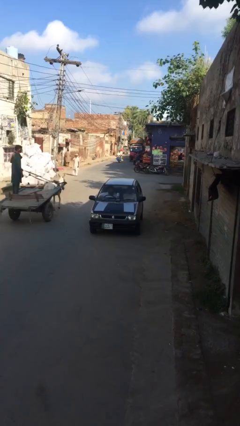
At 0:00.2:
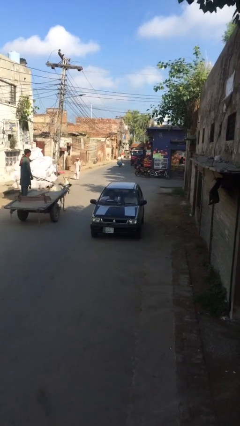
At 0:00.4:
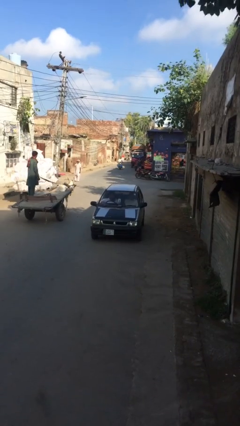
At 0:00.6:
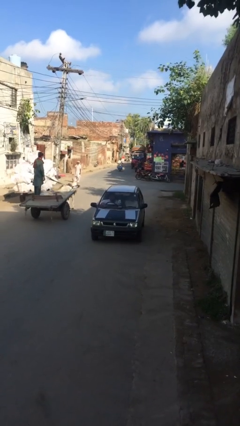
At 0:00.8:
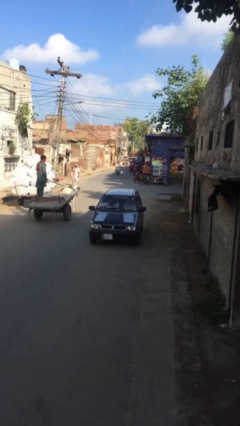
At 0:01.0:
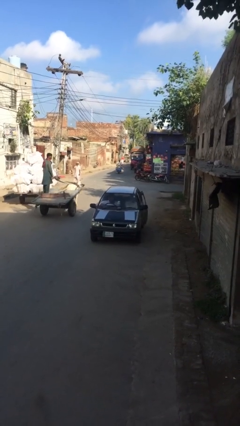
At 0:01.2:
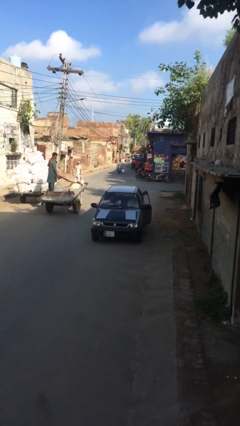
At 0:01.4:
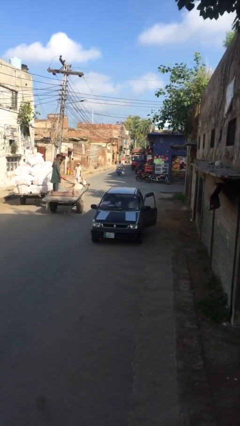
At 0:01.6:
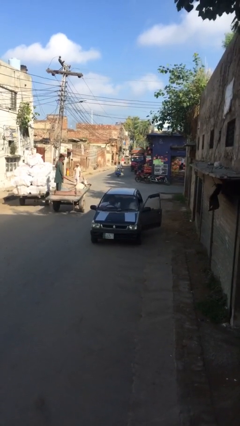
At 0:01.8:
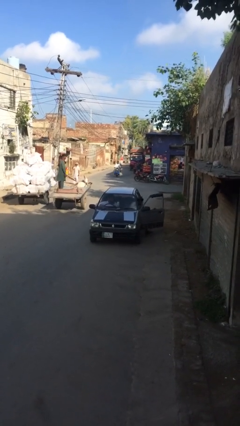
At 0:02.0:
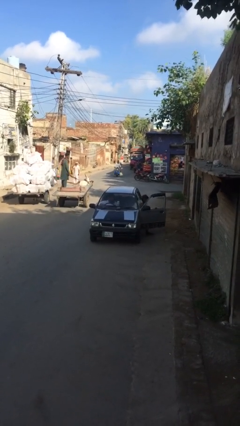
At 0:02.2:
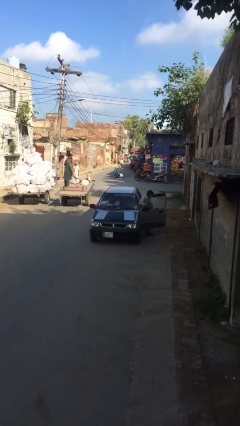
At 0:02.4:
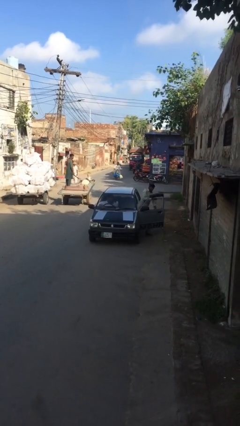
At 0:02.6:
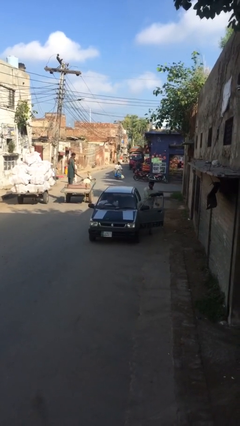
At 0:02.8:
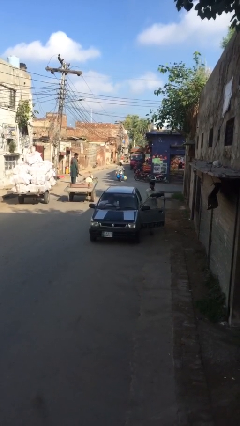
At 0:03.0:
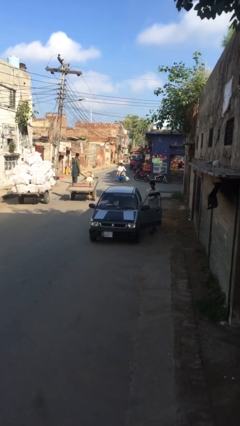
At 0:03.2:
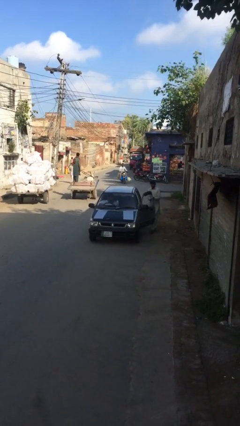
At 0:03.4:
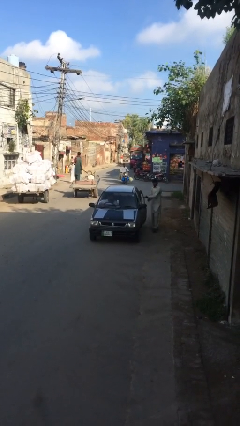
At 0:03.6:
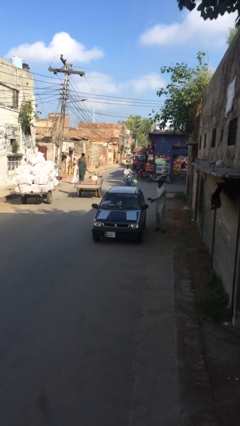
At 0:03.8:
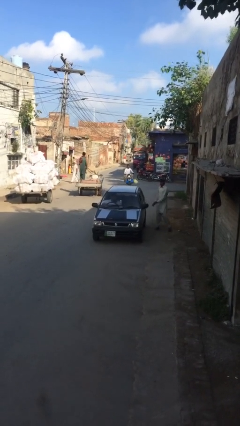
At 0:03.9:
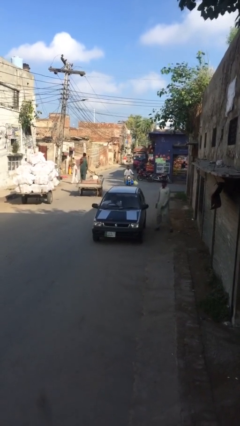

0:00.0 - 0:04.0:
car drops off person

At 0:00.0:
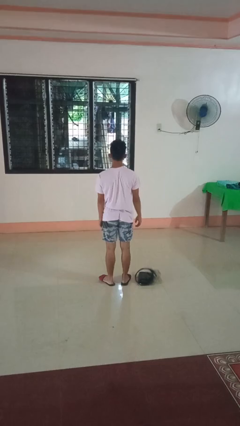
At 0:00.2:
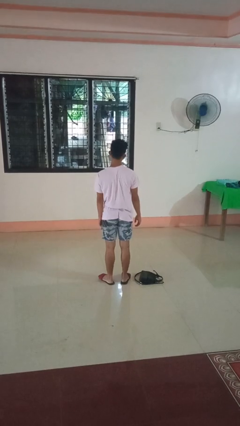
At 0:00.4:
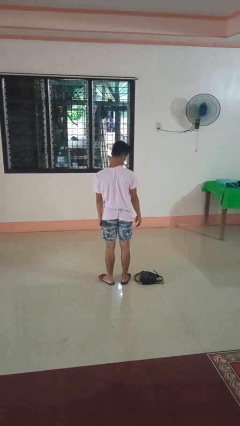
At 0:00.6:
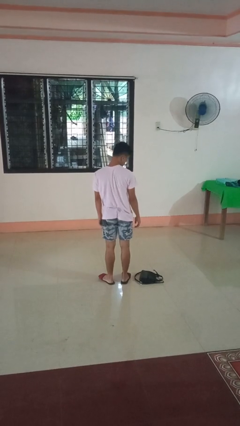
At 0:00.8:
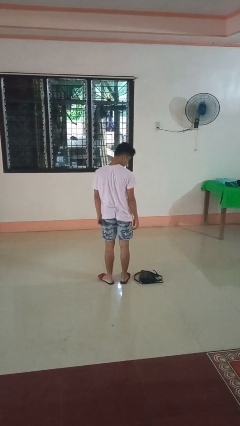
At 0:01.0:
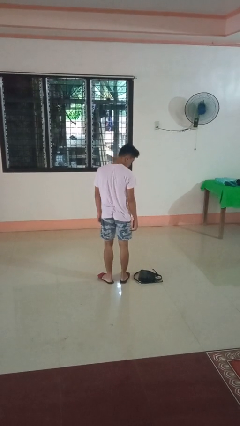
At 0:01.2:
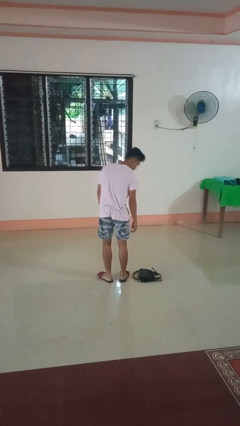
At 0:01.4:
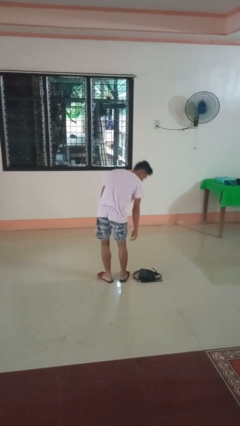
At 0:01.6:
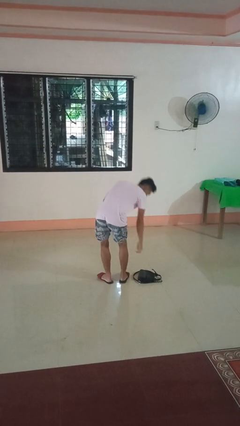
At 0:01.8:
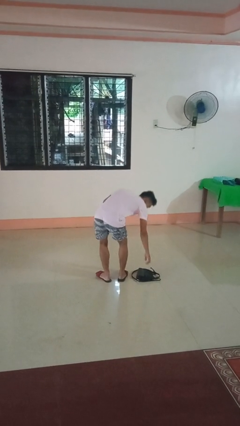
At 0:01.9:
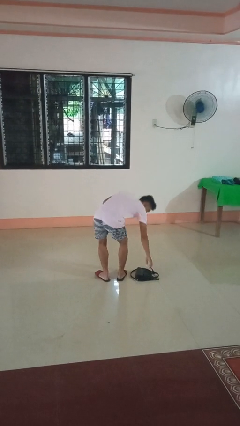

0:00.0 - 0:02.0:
person drops object

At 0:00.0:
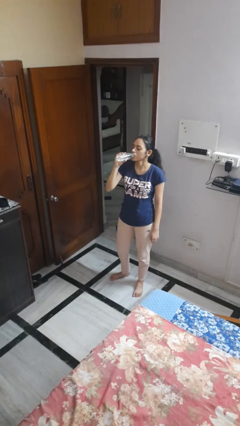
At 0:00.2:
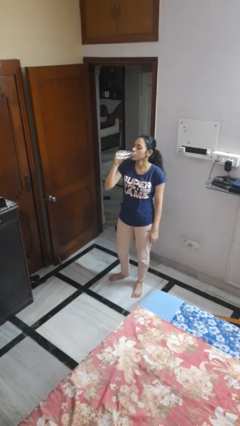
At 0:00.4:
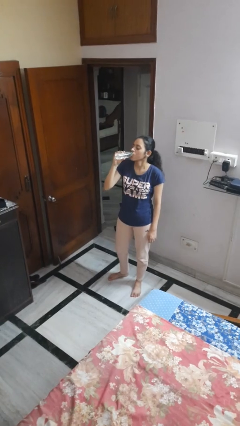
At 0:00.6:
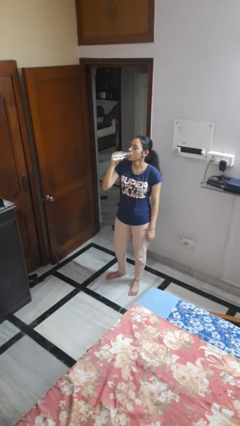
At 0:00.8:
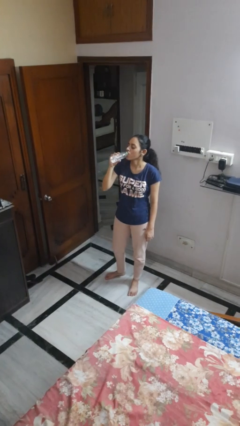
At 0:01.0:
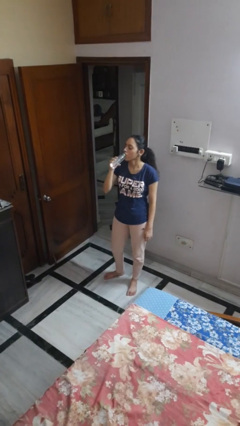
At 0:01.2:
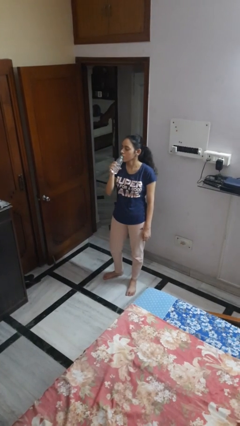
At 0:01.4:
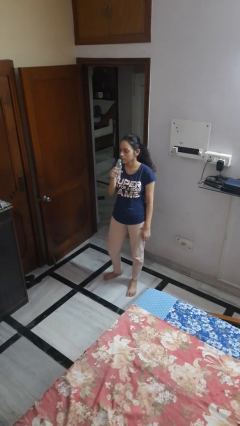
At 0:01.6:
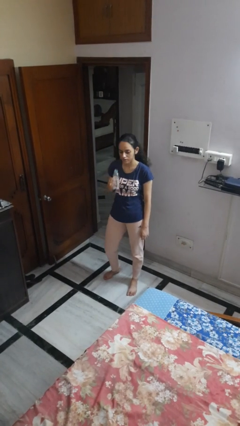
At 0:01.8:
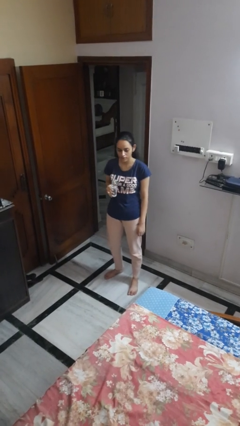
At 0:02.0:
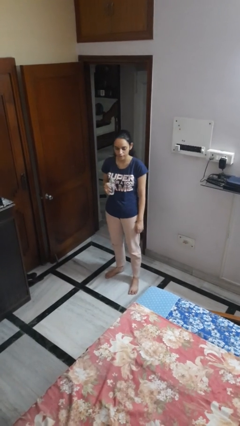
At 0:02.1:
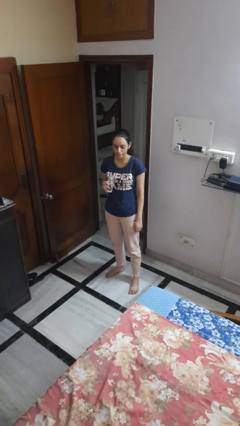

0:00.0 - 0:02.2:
person drinks from bottle

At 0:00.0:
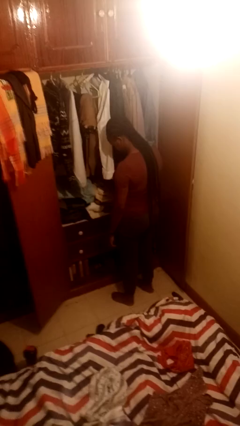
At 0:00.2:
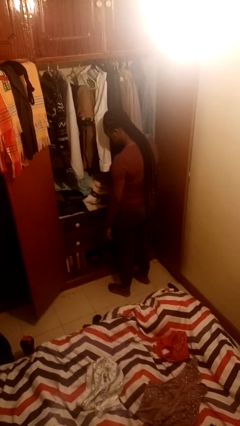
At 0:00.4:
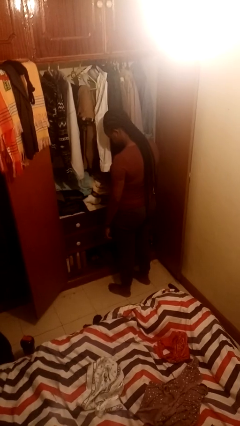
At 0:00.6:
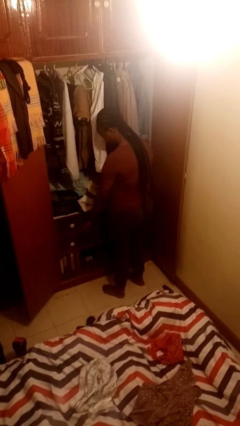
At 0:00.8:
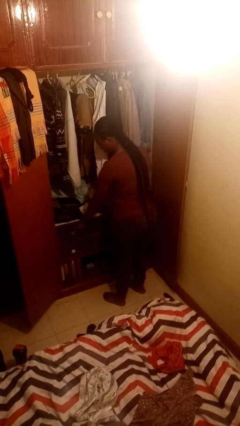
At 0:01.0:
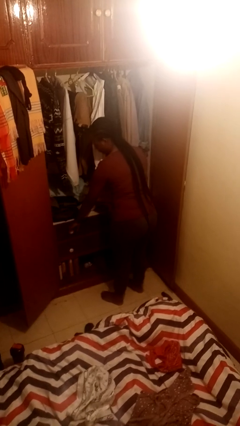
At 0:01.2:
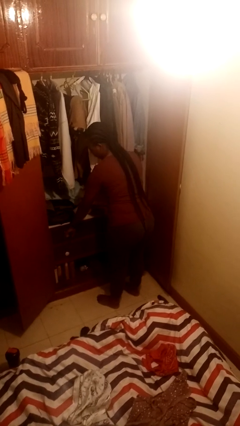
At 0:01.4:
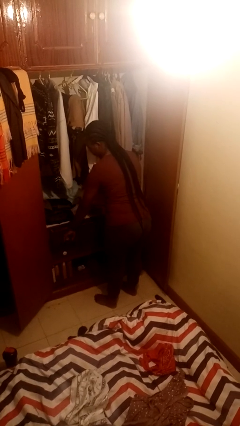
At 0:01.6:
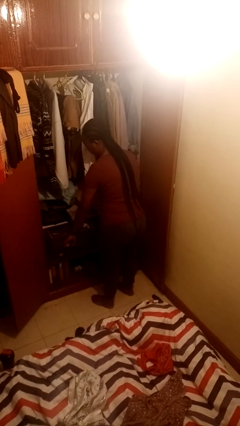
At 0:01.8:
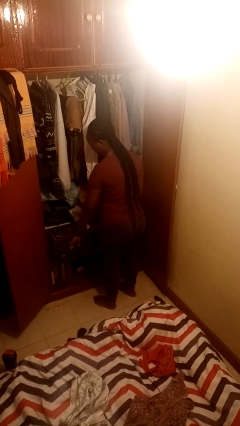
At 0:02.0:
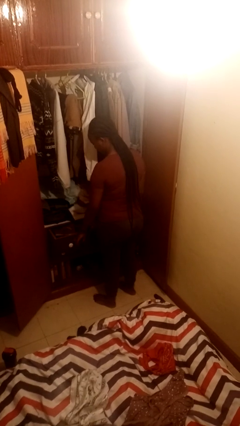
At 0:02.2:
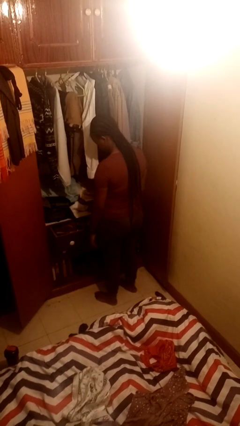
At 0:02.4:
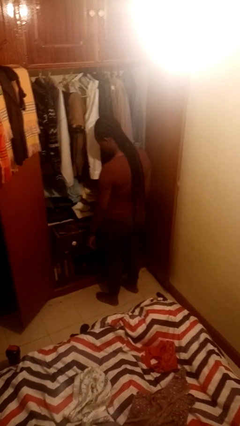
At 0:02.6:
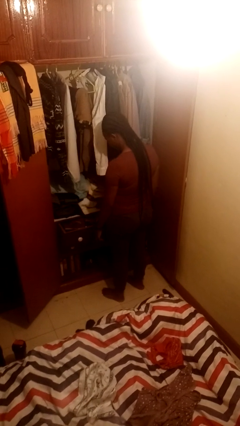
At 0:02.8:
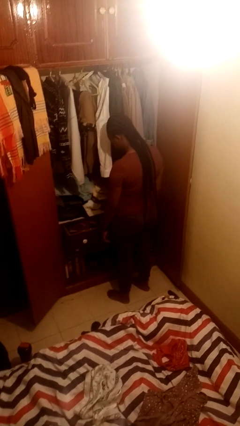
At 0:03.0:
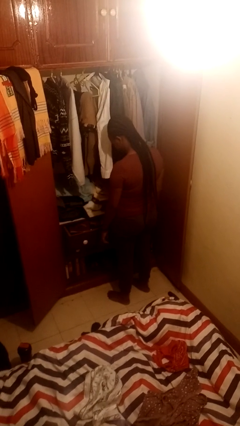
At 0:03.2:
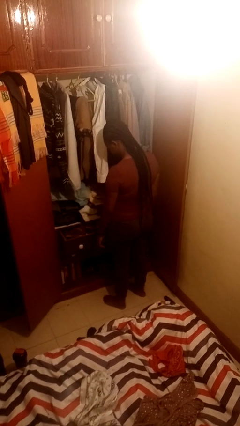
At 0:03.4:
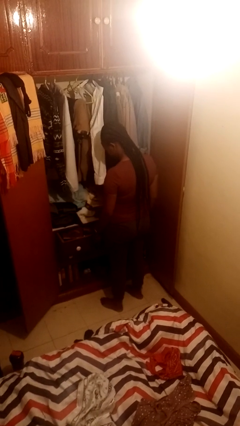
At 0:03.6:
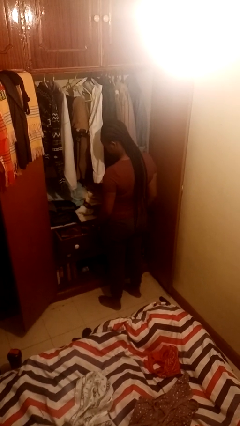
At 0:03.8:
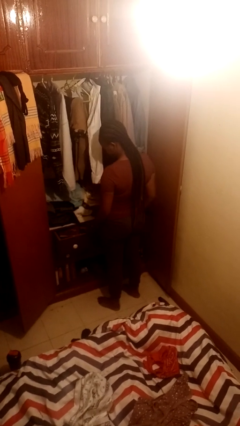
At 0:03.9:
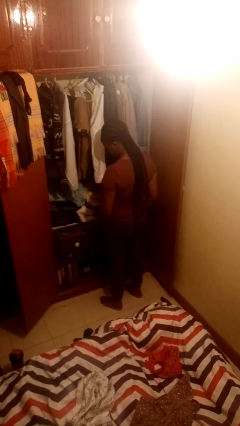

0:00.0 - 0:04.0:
person opens dresser drawer

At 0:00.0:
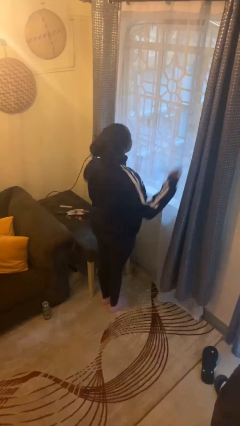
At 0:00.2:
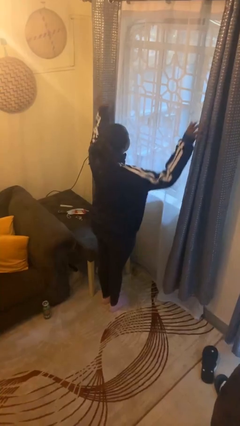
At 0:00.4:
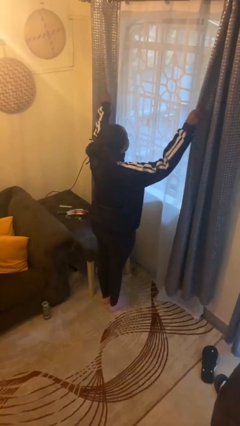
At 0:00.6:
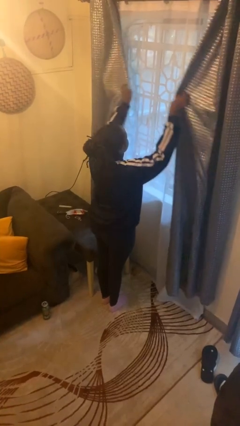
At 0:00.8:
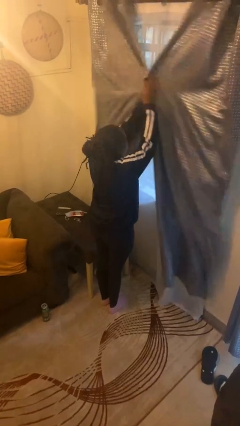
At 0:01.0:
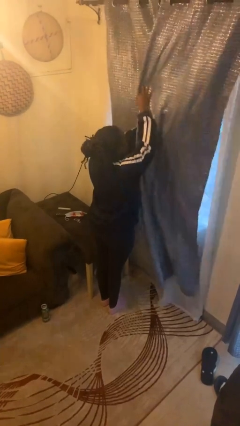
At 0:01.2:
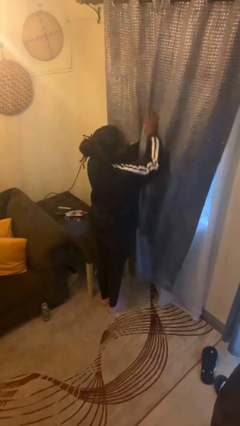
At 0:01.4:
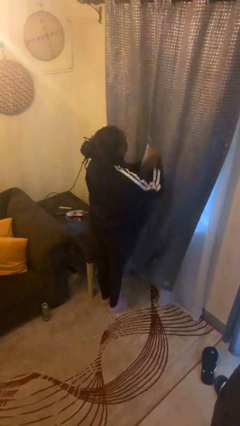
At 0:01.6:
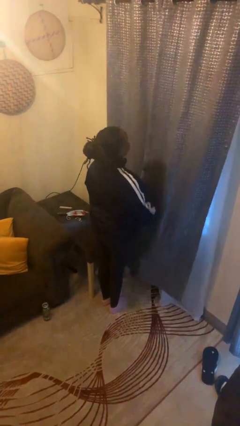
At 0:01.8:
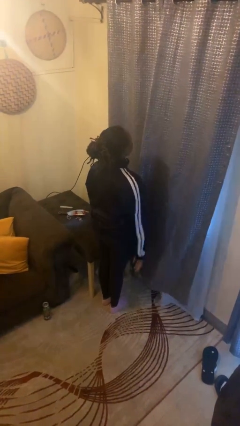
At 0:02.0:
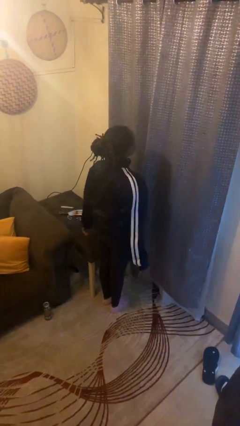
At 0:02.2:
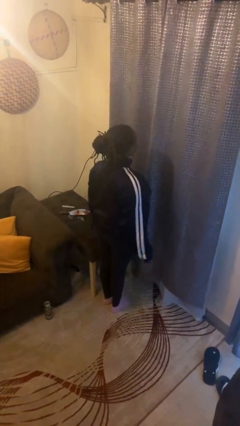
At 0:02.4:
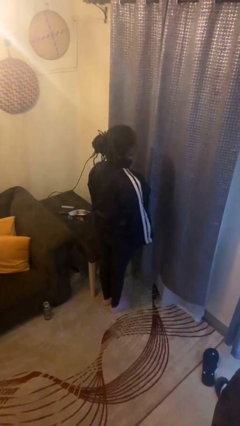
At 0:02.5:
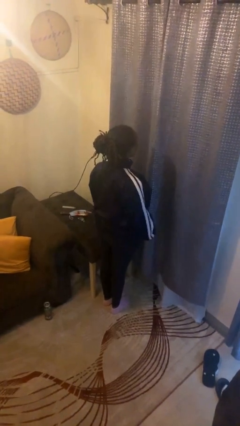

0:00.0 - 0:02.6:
person closes curtains

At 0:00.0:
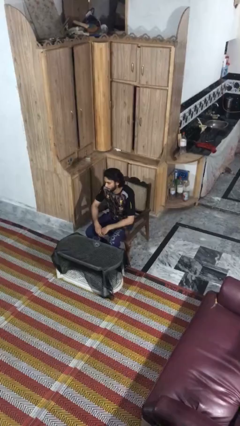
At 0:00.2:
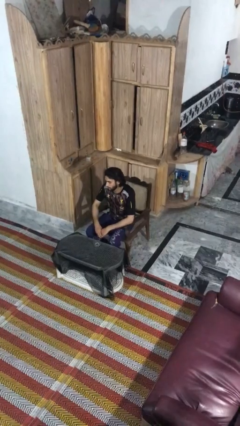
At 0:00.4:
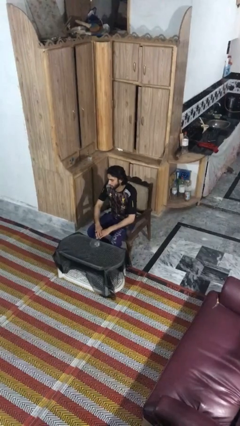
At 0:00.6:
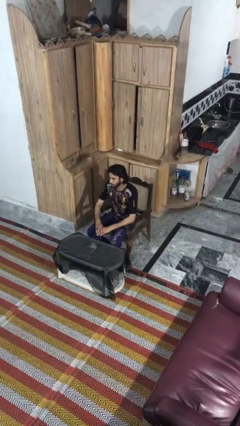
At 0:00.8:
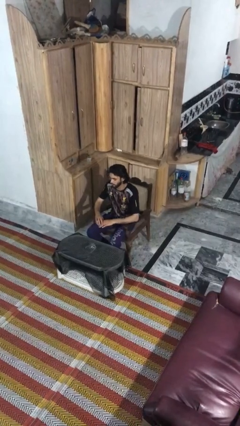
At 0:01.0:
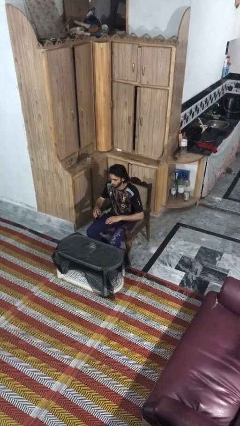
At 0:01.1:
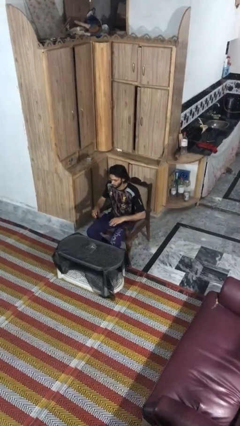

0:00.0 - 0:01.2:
person knocks over glass

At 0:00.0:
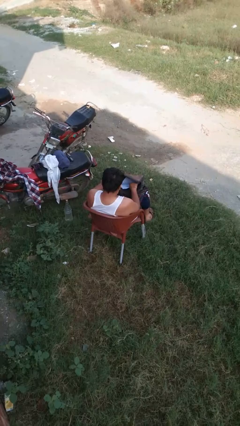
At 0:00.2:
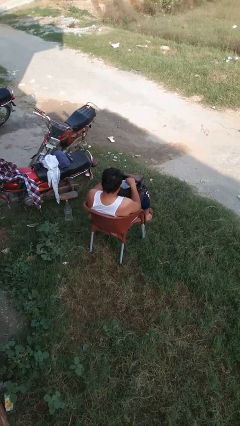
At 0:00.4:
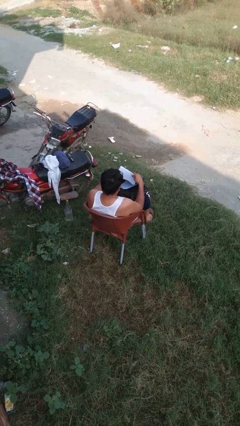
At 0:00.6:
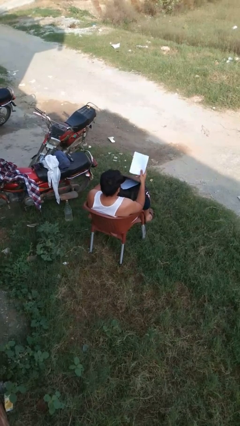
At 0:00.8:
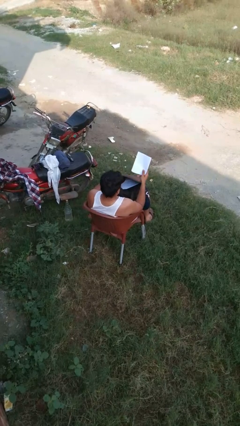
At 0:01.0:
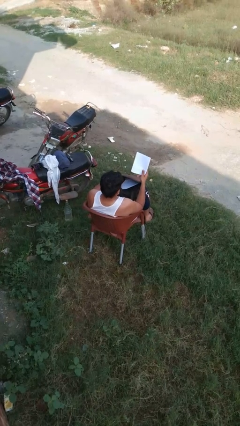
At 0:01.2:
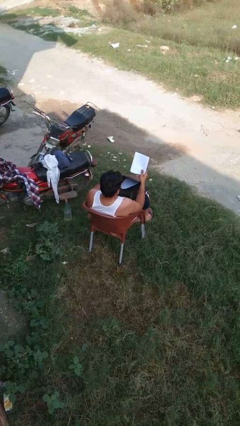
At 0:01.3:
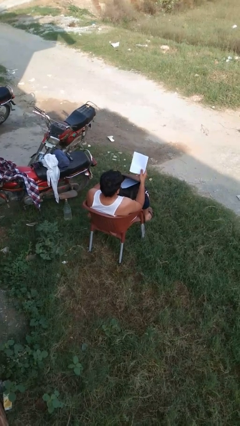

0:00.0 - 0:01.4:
person takes object from backpack
